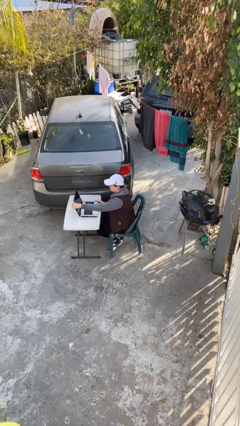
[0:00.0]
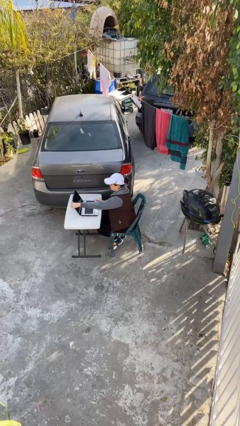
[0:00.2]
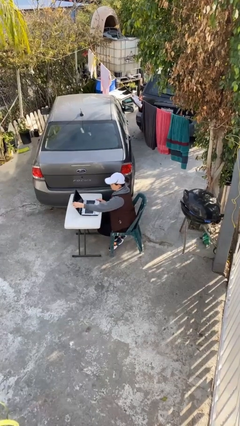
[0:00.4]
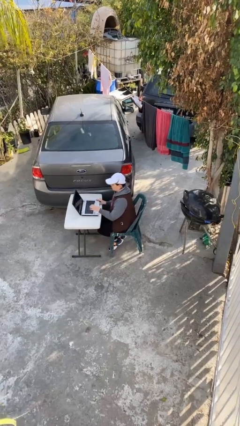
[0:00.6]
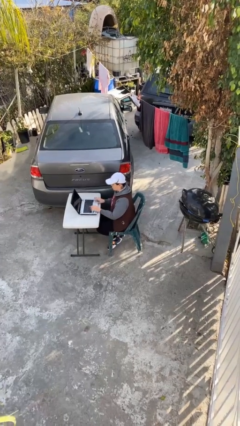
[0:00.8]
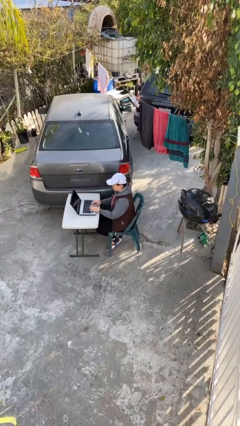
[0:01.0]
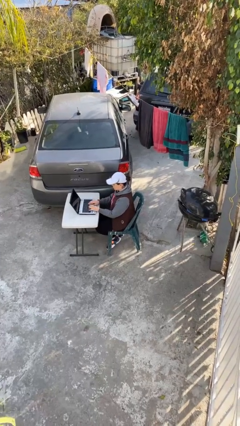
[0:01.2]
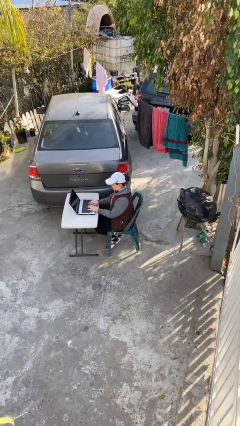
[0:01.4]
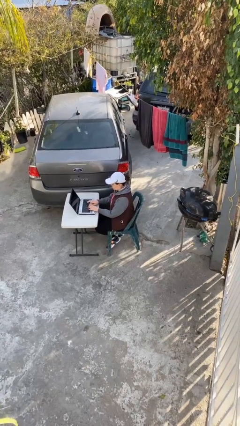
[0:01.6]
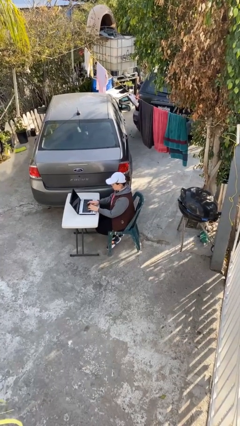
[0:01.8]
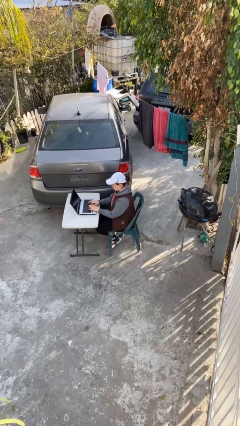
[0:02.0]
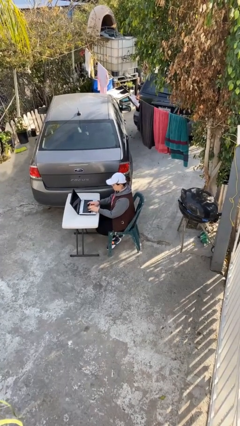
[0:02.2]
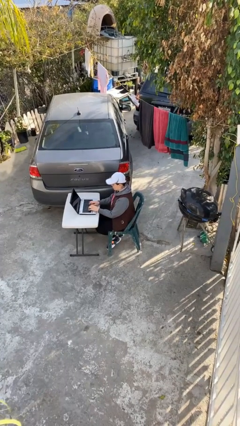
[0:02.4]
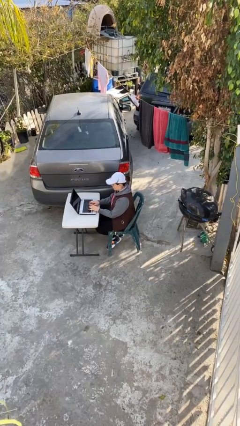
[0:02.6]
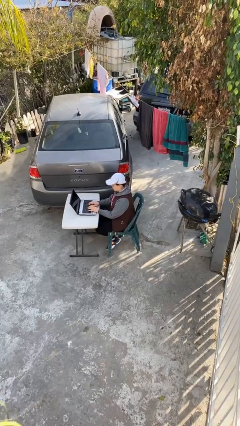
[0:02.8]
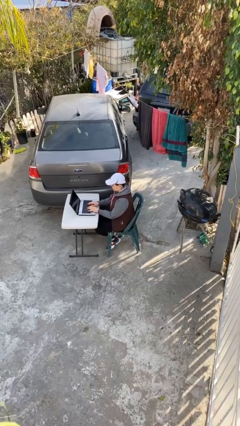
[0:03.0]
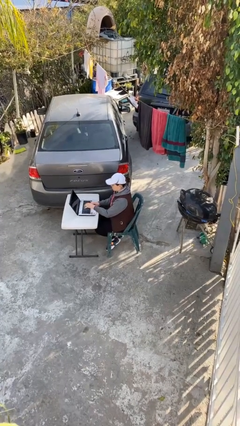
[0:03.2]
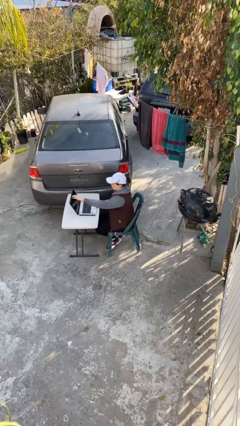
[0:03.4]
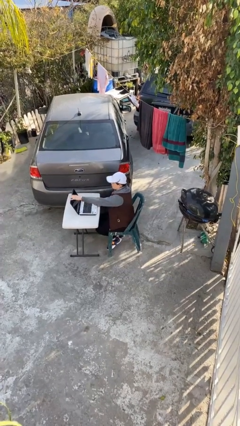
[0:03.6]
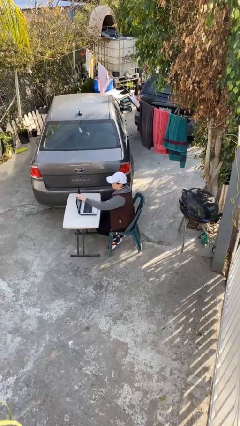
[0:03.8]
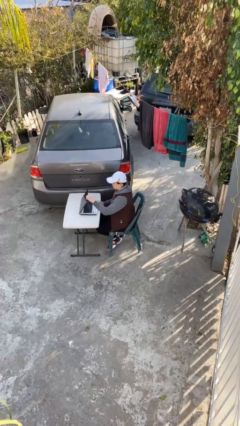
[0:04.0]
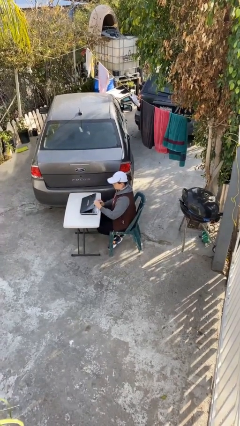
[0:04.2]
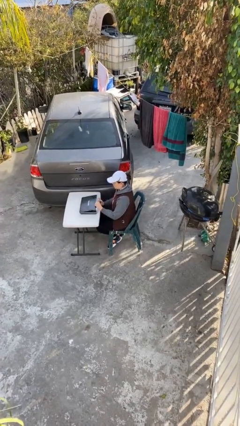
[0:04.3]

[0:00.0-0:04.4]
person interacts with laptop

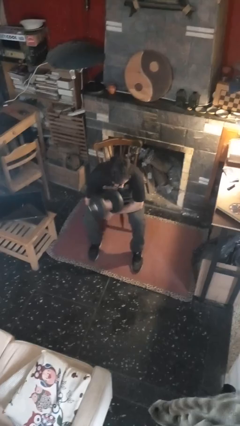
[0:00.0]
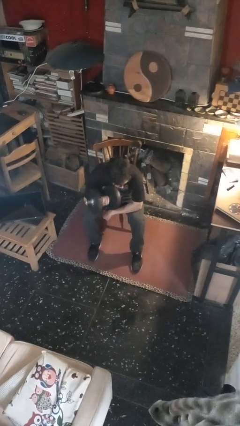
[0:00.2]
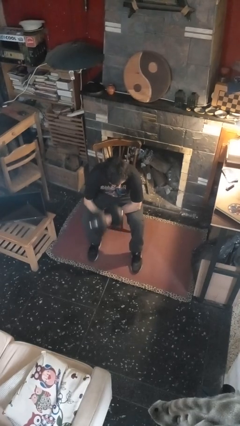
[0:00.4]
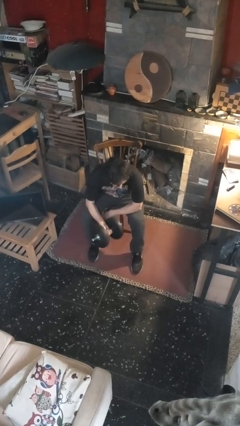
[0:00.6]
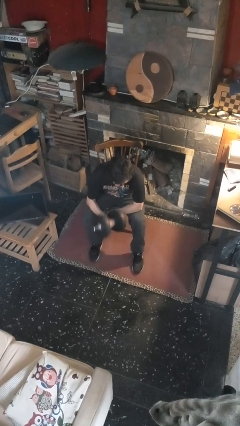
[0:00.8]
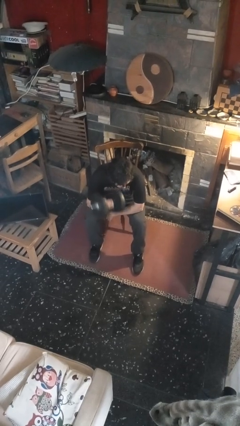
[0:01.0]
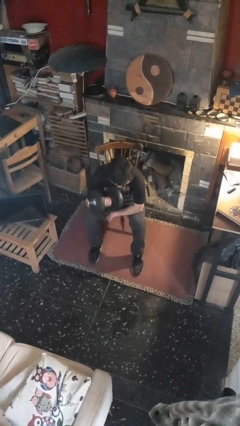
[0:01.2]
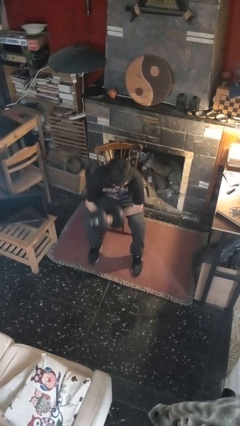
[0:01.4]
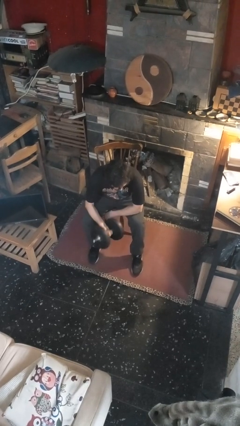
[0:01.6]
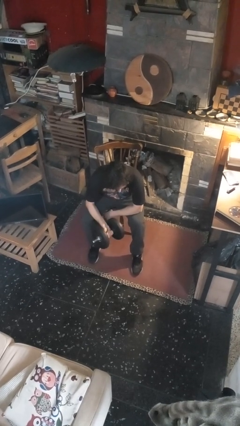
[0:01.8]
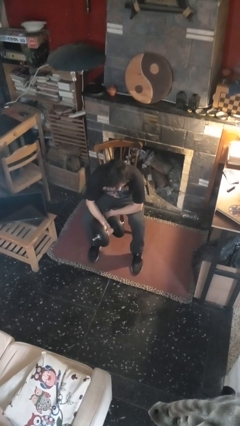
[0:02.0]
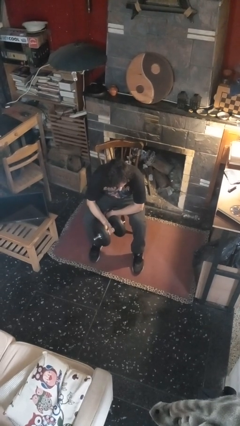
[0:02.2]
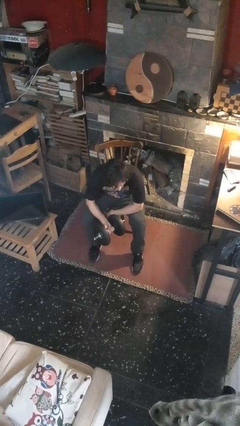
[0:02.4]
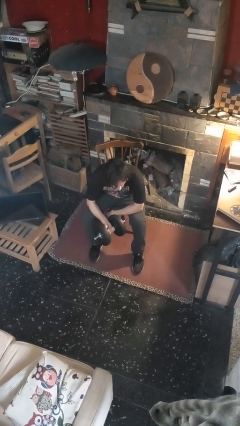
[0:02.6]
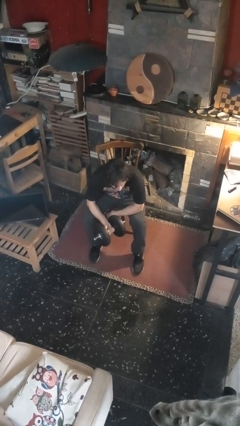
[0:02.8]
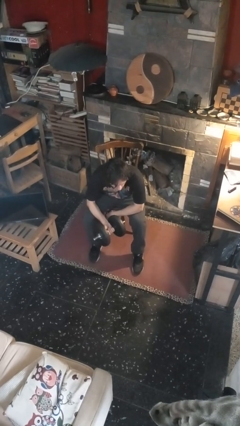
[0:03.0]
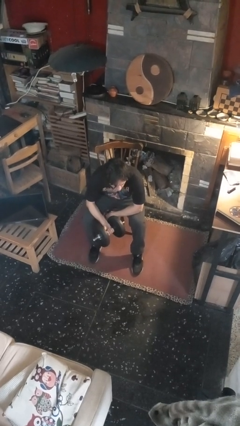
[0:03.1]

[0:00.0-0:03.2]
person lifts dumbbells

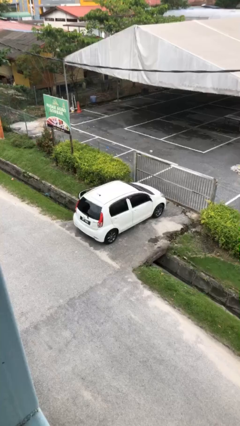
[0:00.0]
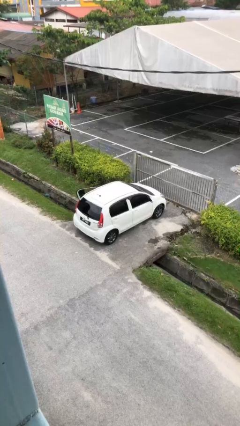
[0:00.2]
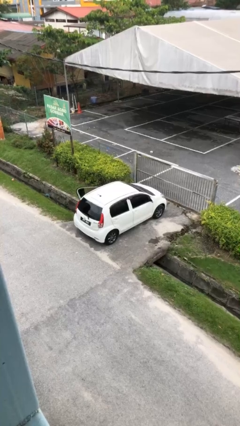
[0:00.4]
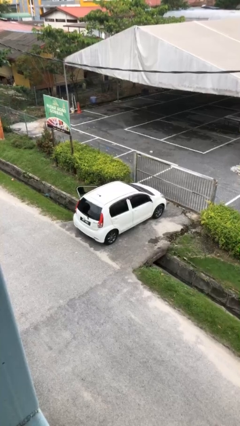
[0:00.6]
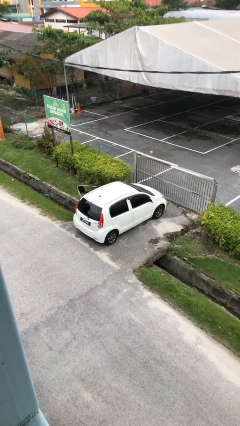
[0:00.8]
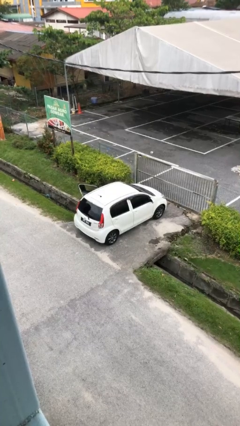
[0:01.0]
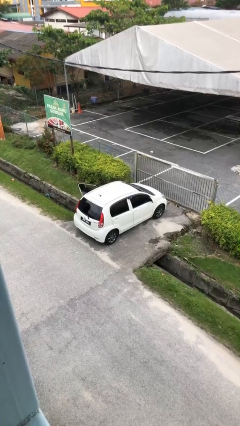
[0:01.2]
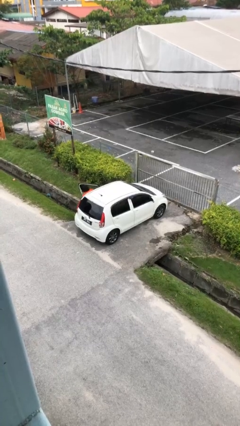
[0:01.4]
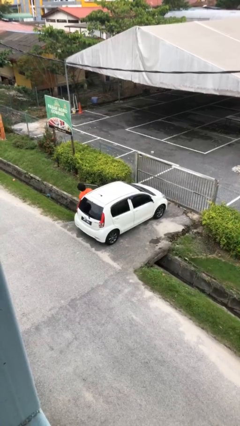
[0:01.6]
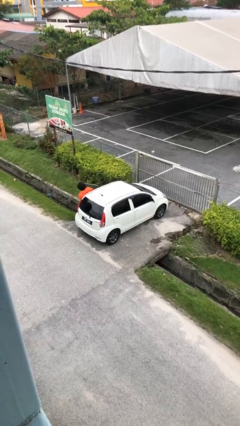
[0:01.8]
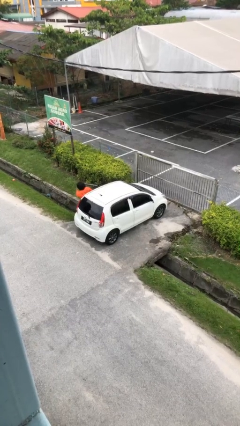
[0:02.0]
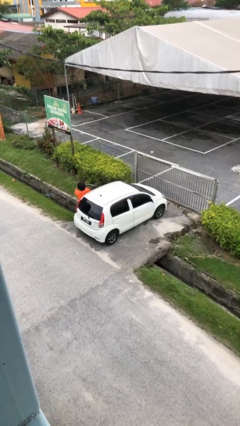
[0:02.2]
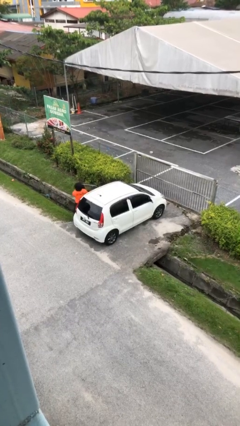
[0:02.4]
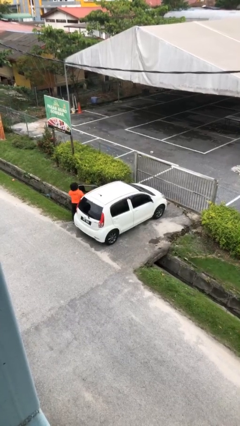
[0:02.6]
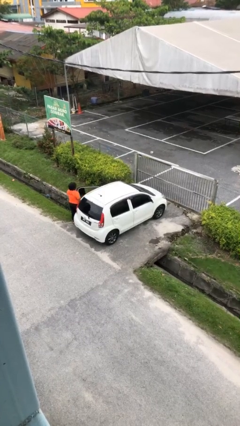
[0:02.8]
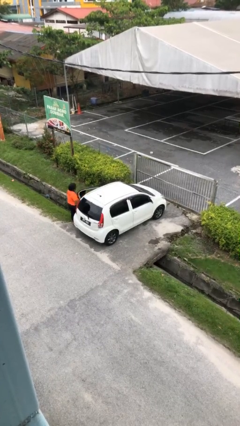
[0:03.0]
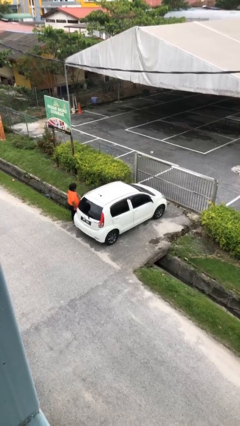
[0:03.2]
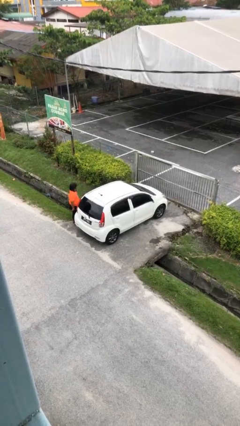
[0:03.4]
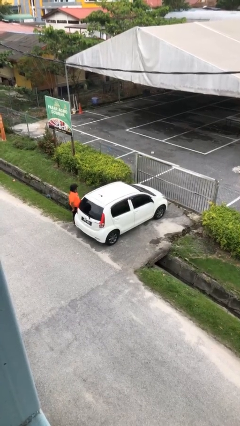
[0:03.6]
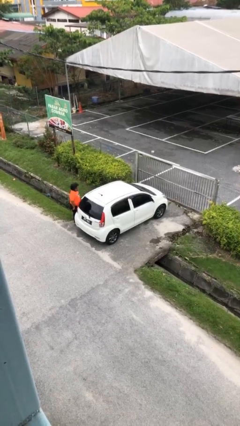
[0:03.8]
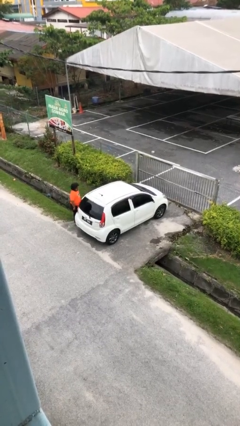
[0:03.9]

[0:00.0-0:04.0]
car drops off person

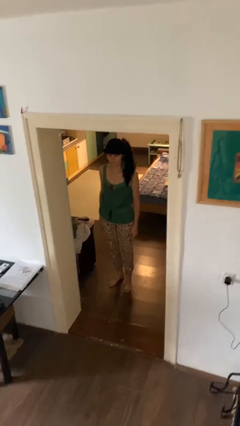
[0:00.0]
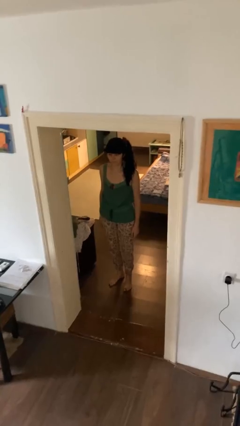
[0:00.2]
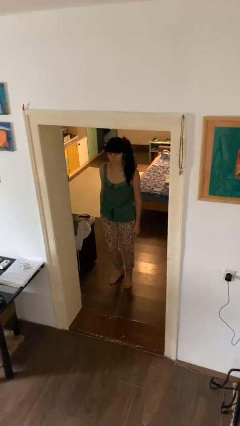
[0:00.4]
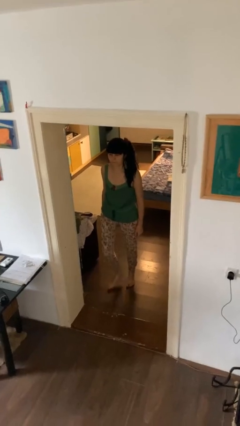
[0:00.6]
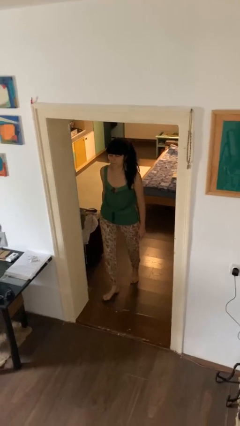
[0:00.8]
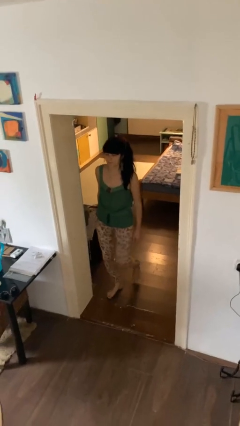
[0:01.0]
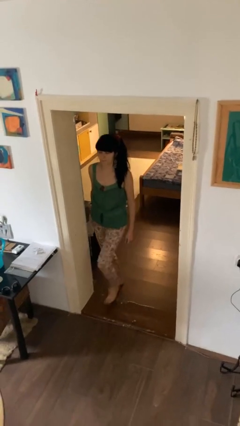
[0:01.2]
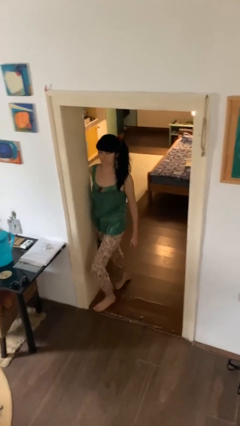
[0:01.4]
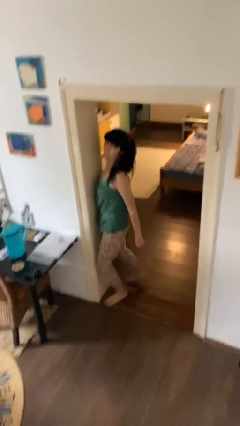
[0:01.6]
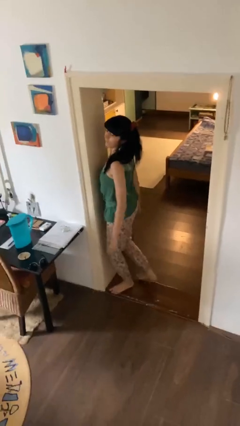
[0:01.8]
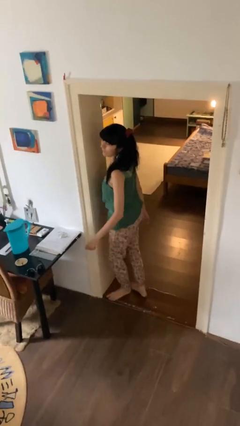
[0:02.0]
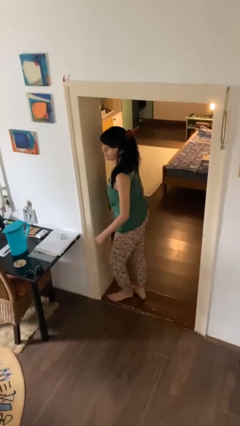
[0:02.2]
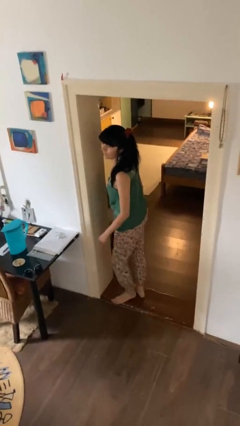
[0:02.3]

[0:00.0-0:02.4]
person bumps into wall

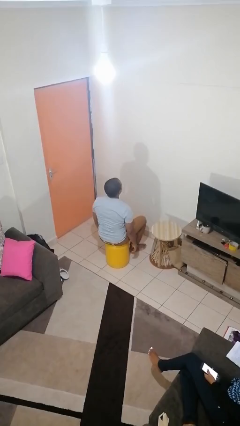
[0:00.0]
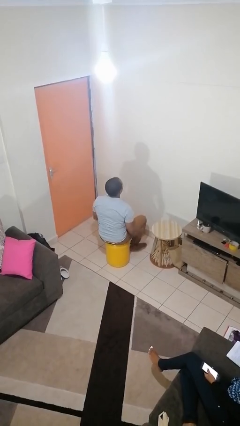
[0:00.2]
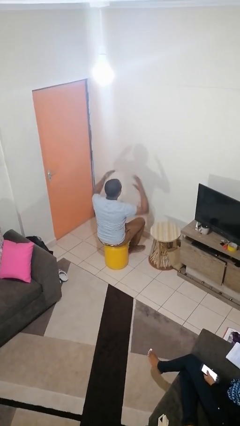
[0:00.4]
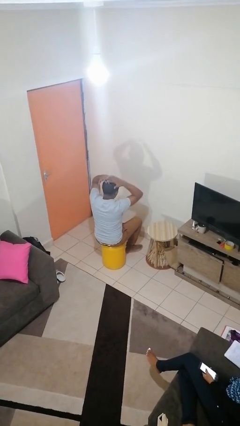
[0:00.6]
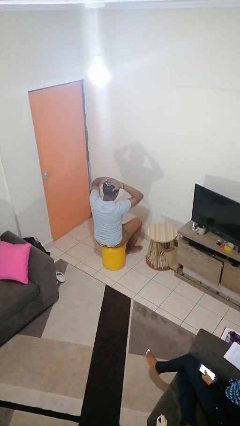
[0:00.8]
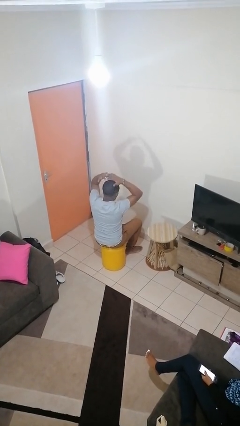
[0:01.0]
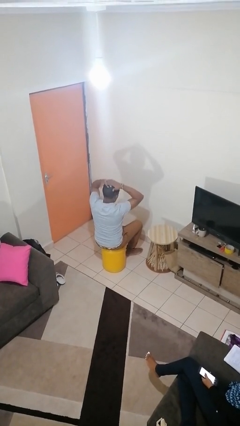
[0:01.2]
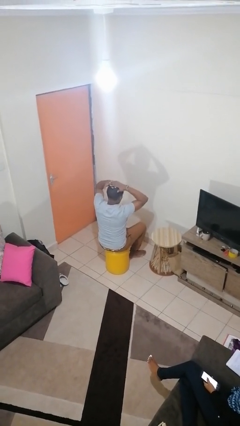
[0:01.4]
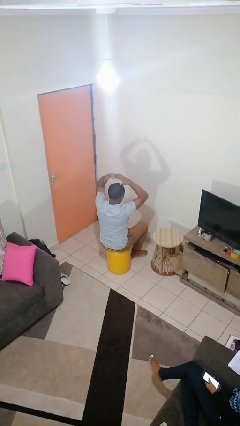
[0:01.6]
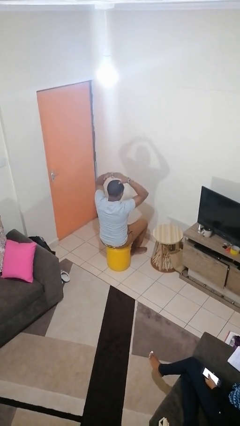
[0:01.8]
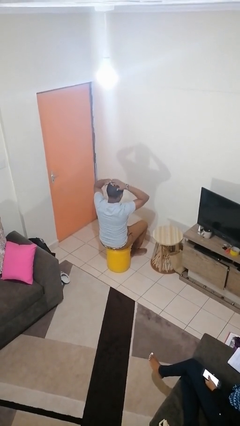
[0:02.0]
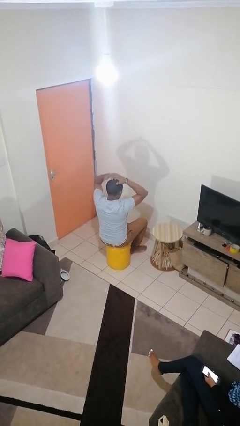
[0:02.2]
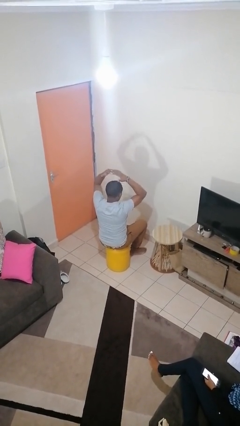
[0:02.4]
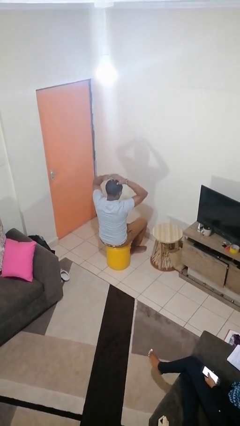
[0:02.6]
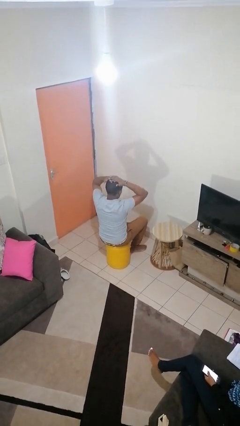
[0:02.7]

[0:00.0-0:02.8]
person pats head

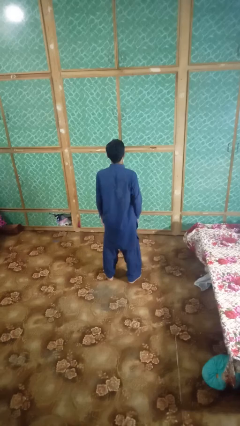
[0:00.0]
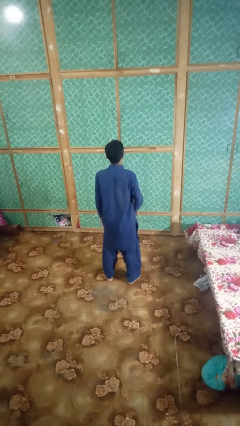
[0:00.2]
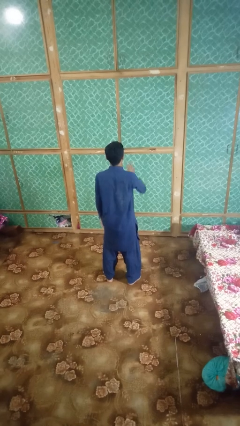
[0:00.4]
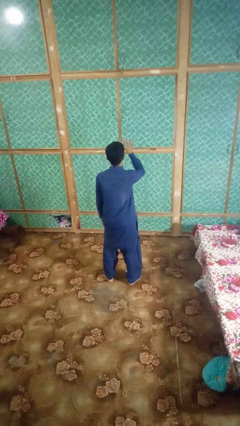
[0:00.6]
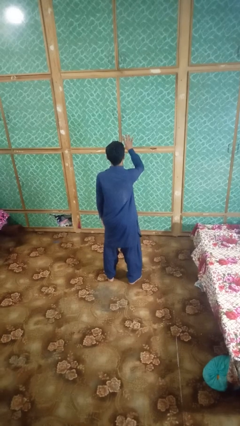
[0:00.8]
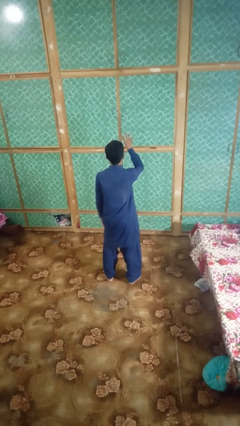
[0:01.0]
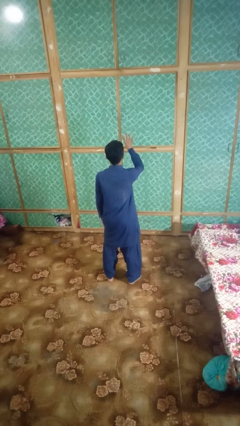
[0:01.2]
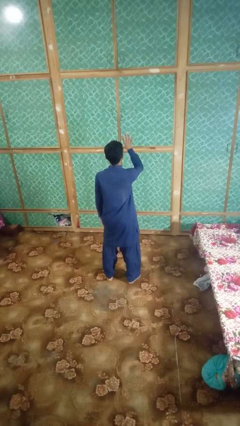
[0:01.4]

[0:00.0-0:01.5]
person gestures number four
